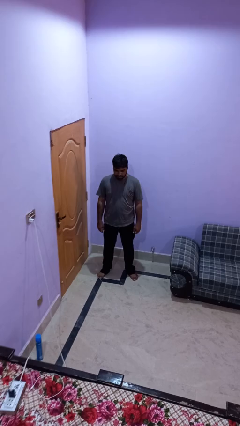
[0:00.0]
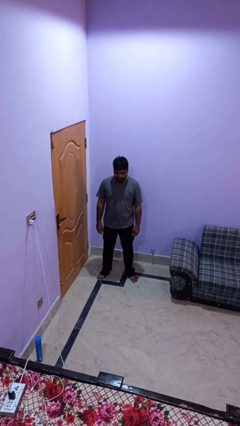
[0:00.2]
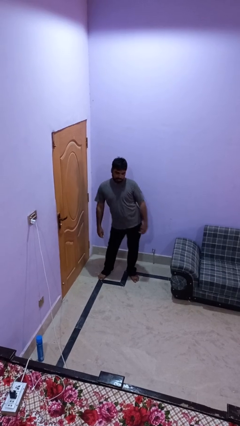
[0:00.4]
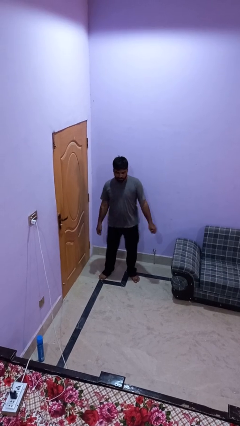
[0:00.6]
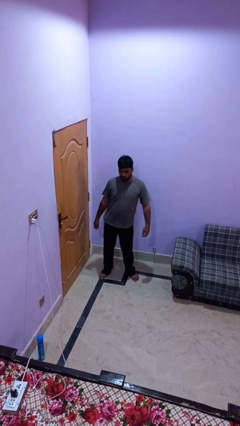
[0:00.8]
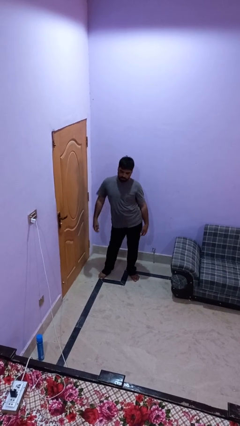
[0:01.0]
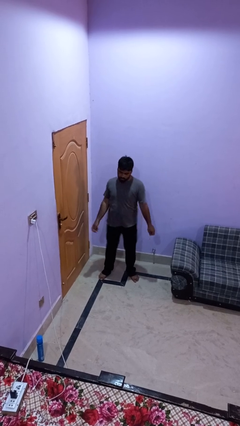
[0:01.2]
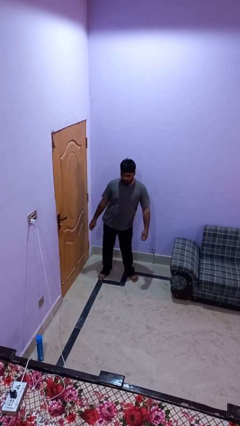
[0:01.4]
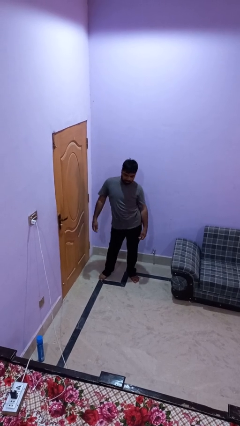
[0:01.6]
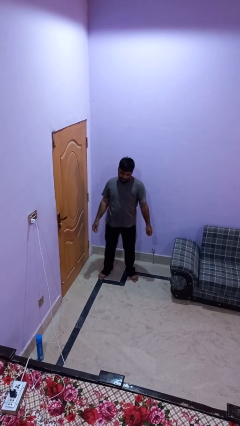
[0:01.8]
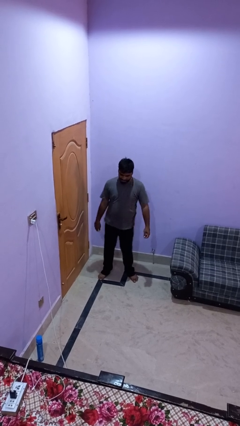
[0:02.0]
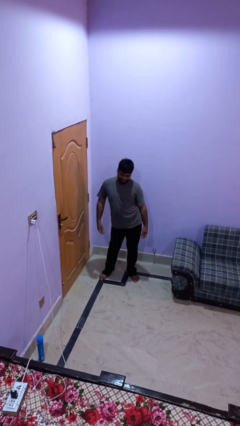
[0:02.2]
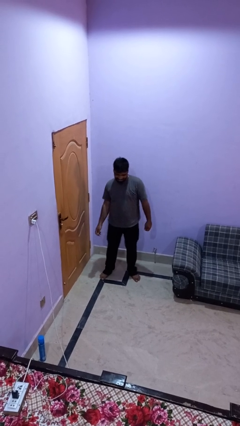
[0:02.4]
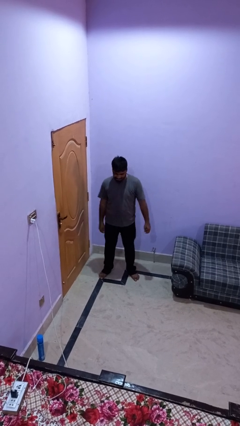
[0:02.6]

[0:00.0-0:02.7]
person wiggles hips

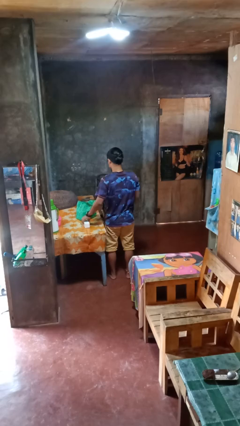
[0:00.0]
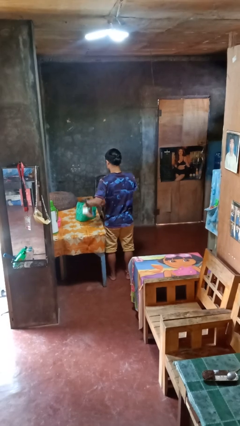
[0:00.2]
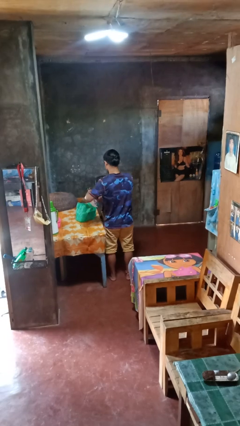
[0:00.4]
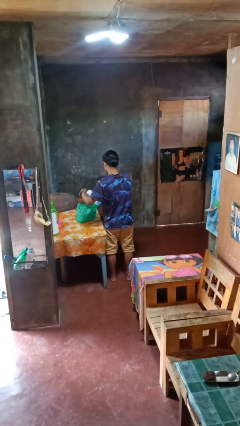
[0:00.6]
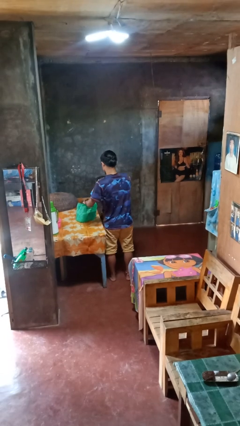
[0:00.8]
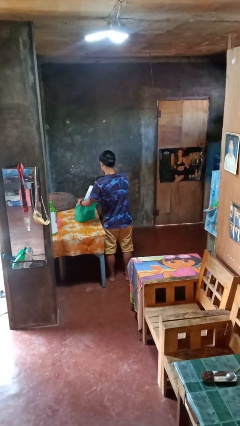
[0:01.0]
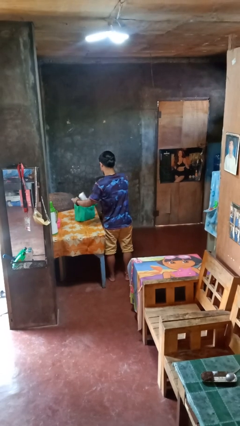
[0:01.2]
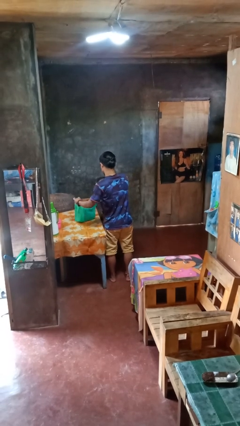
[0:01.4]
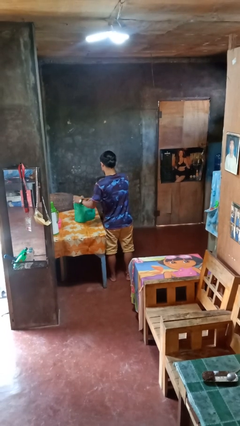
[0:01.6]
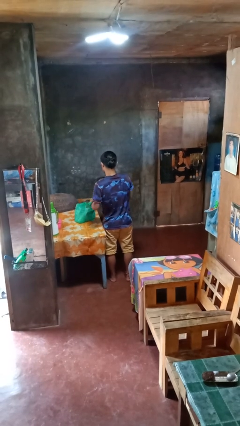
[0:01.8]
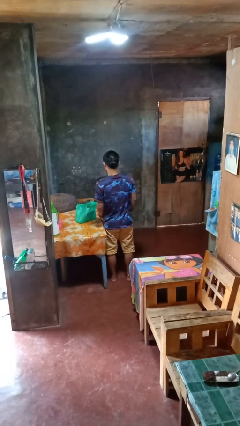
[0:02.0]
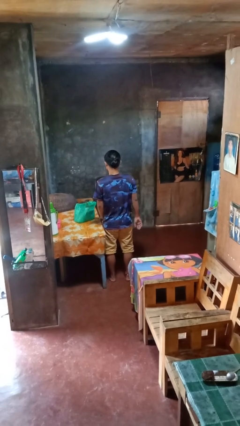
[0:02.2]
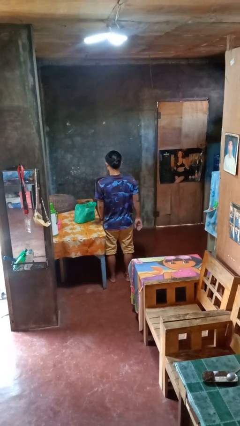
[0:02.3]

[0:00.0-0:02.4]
person puts object into bag

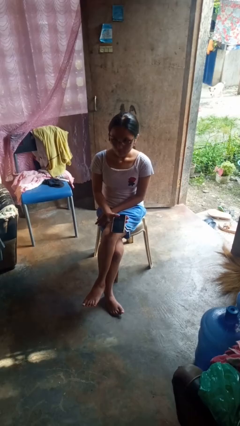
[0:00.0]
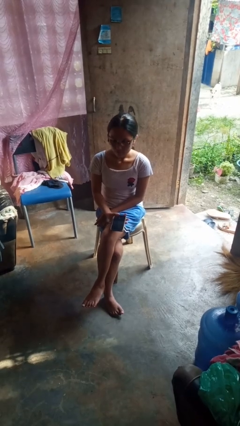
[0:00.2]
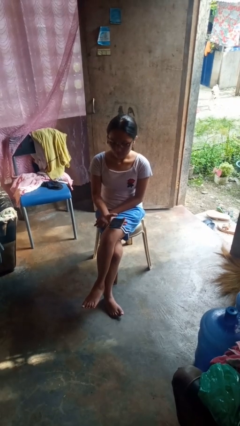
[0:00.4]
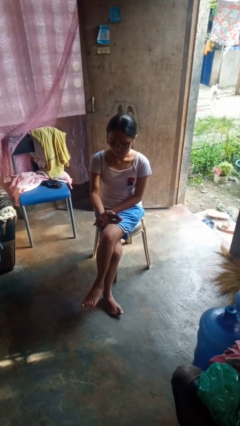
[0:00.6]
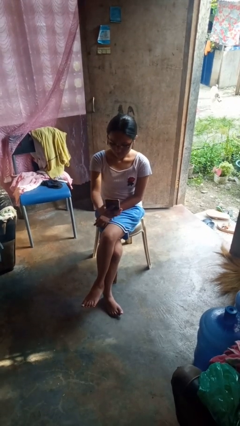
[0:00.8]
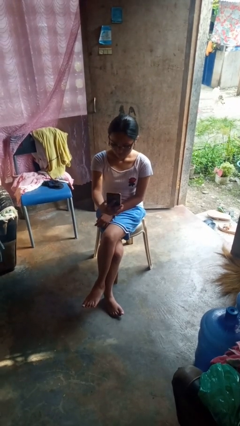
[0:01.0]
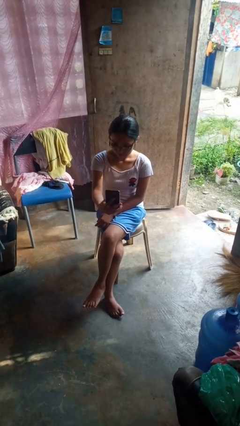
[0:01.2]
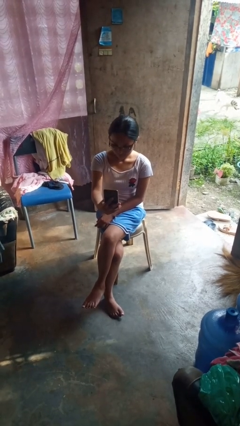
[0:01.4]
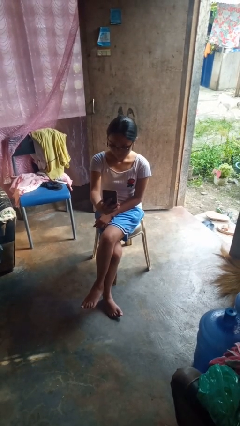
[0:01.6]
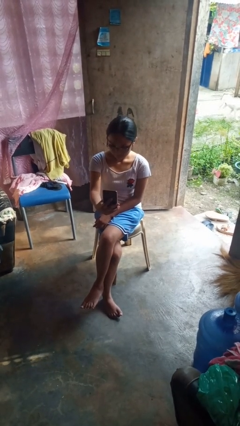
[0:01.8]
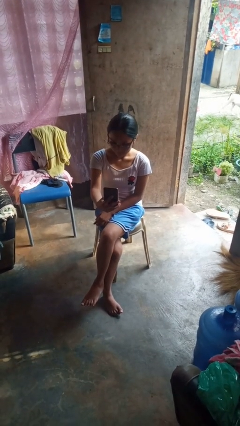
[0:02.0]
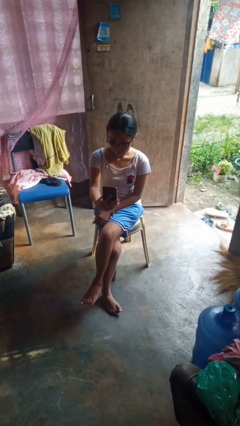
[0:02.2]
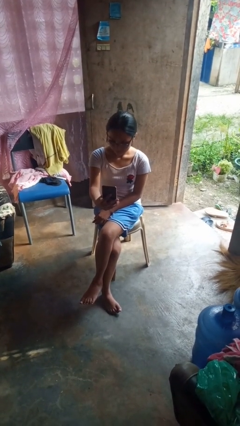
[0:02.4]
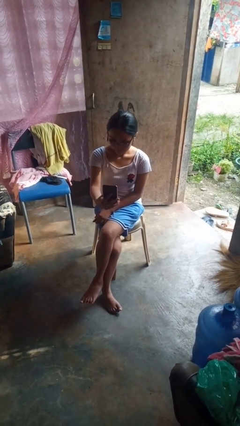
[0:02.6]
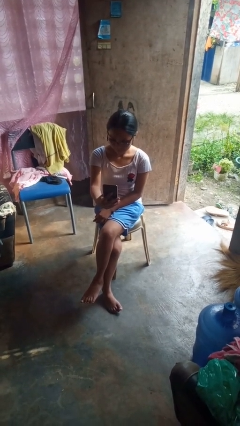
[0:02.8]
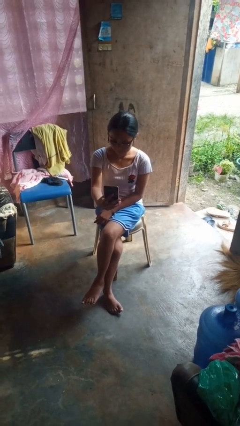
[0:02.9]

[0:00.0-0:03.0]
person takes selfie

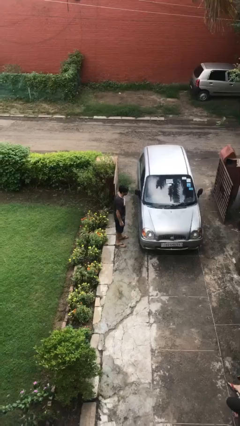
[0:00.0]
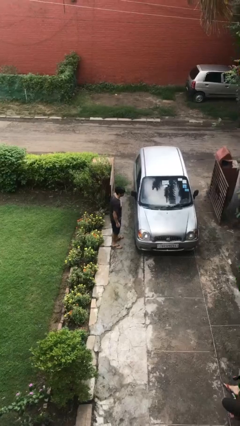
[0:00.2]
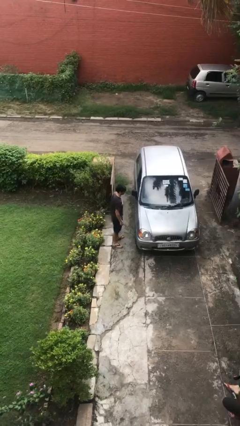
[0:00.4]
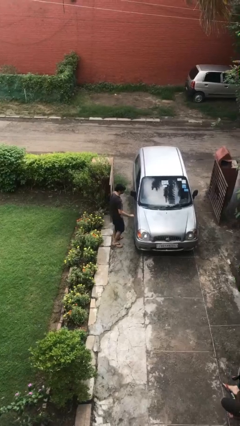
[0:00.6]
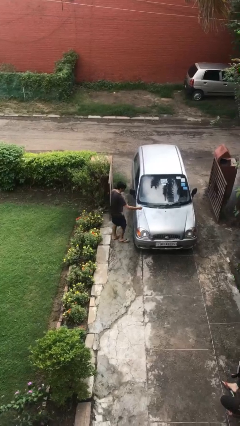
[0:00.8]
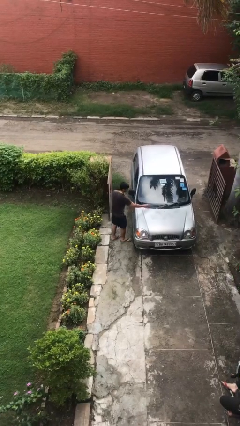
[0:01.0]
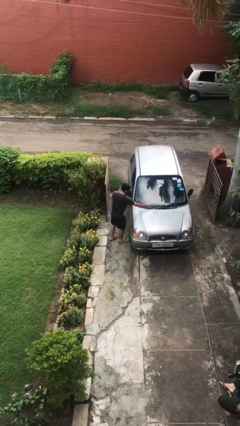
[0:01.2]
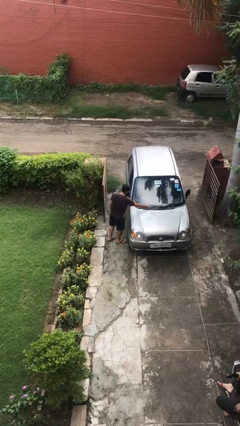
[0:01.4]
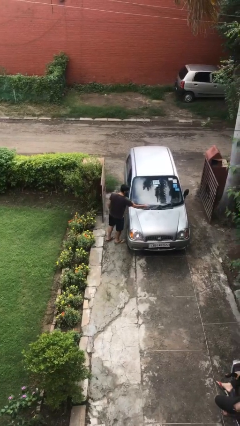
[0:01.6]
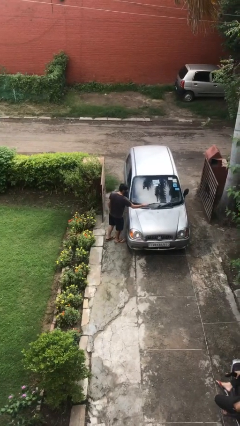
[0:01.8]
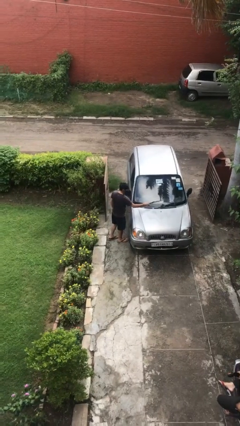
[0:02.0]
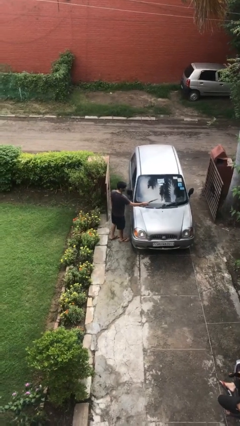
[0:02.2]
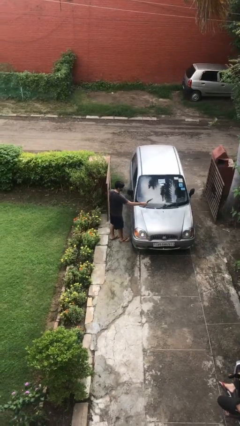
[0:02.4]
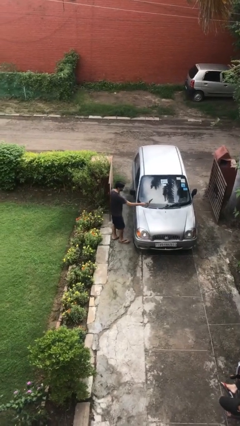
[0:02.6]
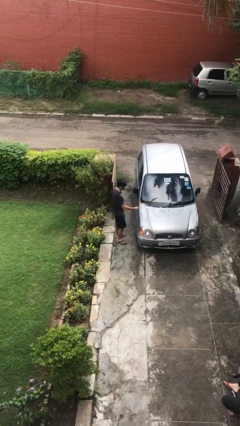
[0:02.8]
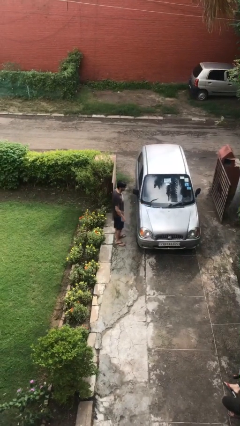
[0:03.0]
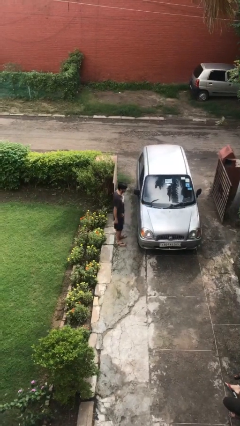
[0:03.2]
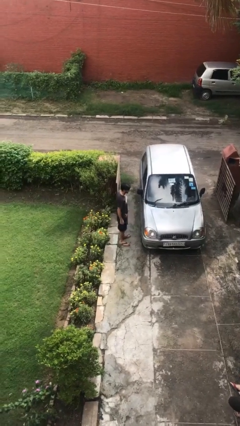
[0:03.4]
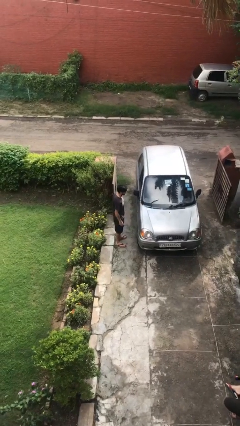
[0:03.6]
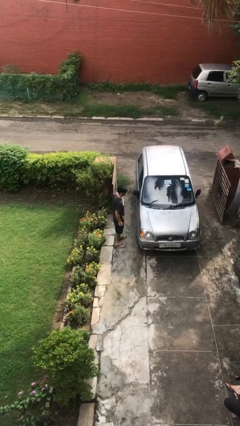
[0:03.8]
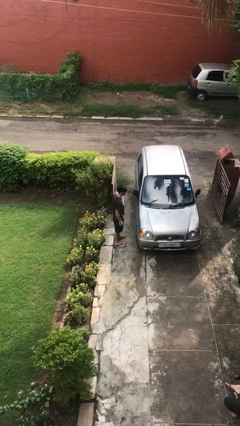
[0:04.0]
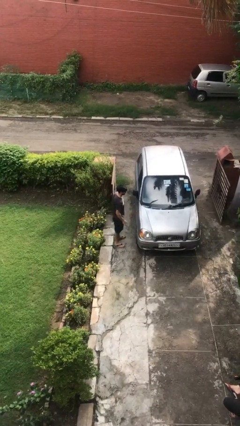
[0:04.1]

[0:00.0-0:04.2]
person flips up car wipers

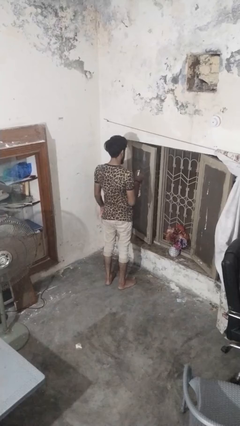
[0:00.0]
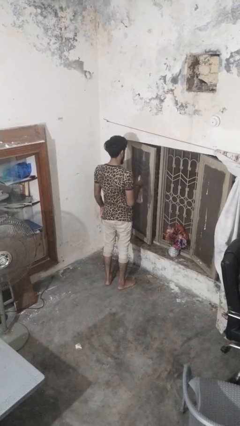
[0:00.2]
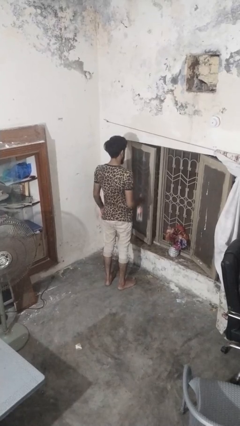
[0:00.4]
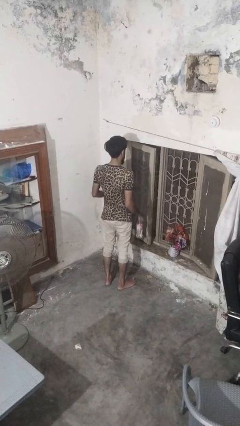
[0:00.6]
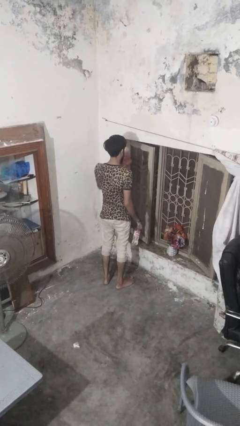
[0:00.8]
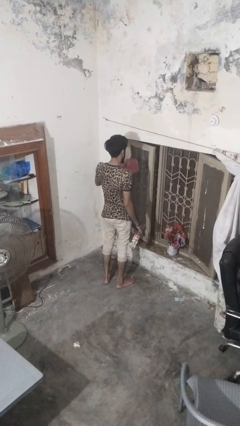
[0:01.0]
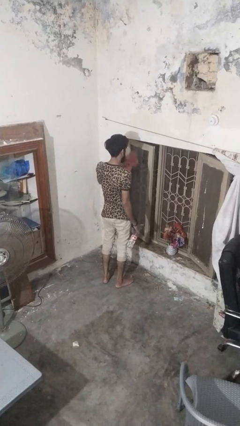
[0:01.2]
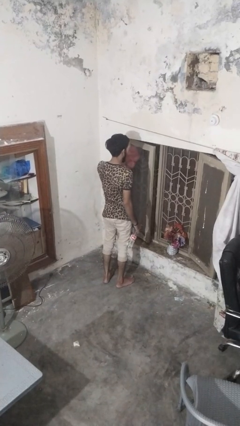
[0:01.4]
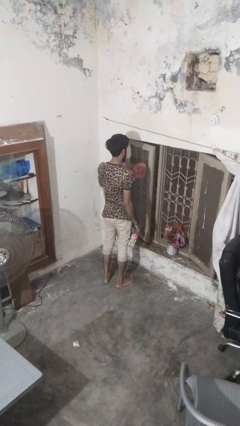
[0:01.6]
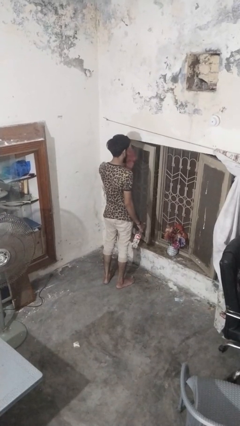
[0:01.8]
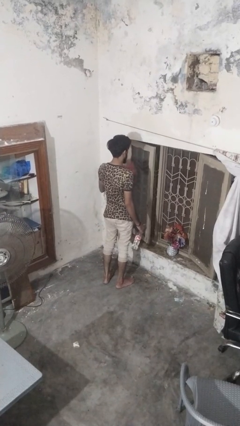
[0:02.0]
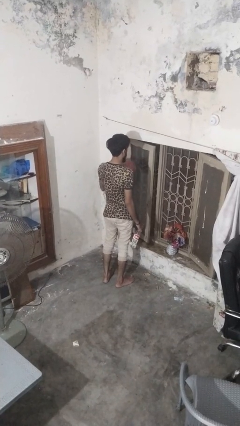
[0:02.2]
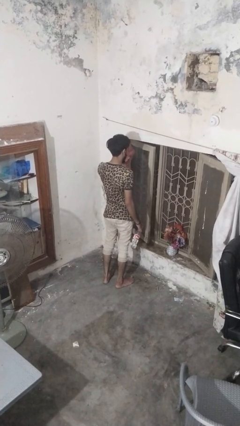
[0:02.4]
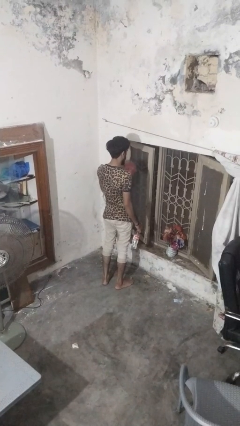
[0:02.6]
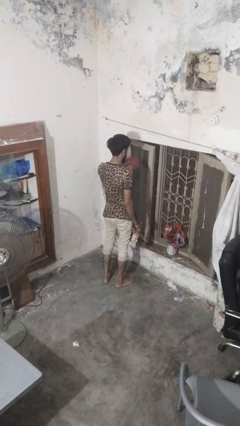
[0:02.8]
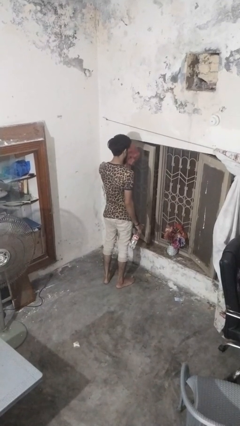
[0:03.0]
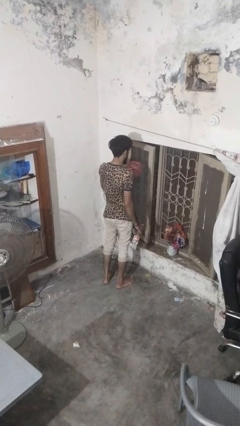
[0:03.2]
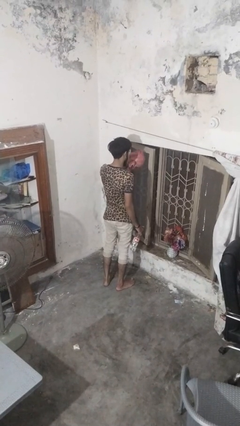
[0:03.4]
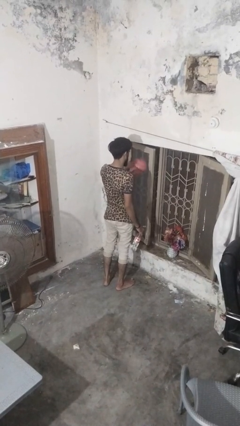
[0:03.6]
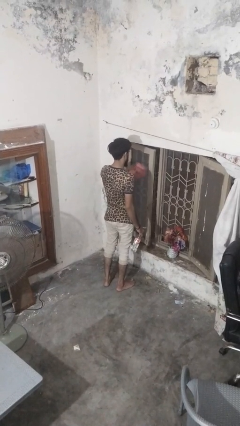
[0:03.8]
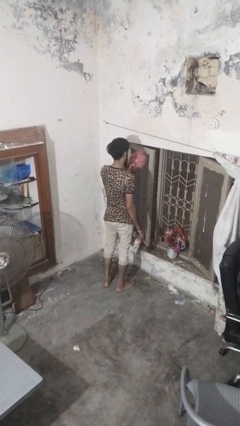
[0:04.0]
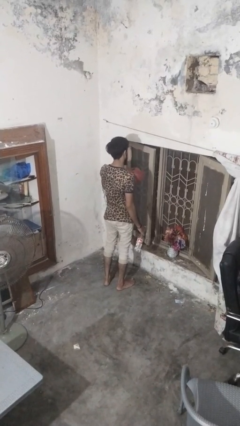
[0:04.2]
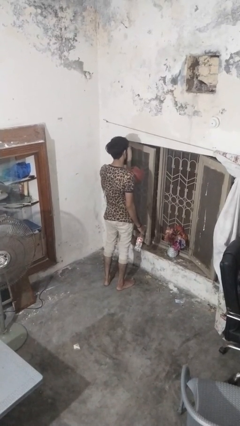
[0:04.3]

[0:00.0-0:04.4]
person washes window

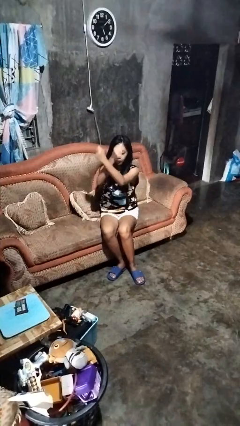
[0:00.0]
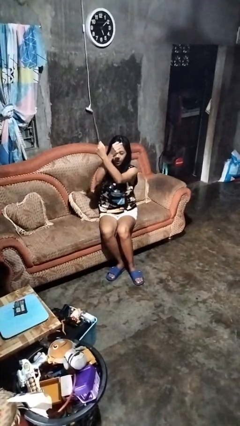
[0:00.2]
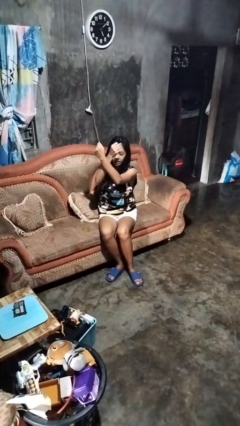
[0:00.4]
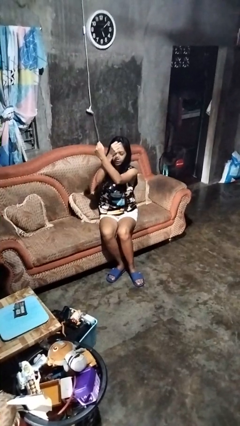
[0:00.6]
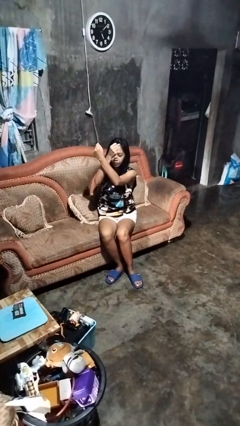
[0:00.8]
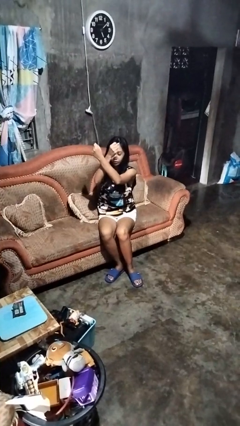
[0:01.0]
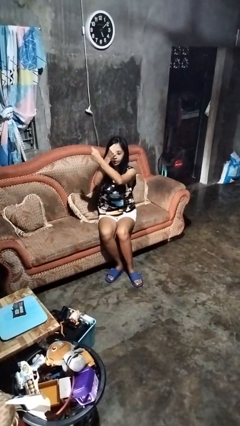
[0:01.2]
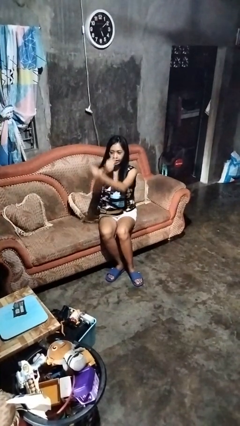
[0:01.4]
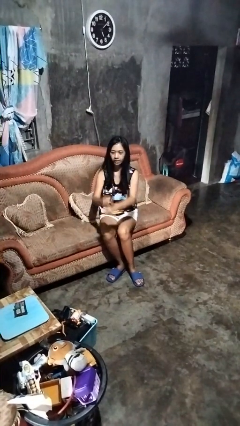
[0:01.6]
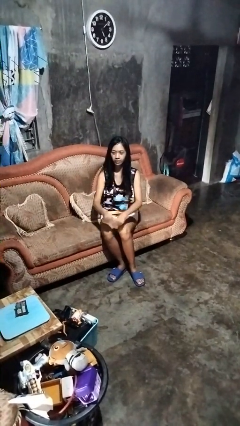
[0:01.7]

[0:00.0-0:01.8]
person gestures arms x
